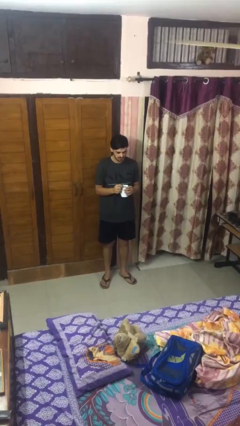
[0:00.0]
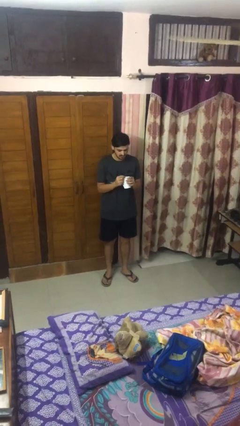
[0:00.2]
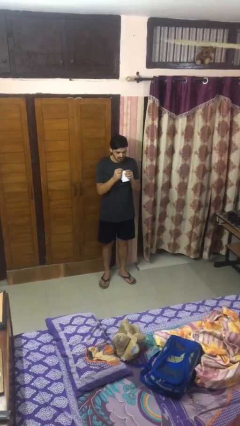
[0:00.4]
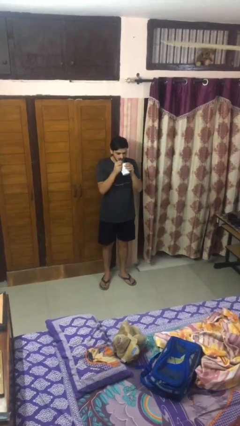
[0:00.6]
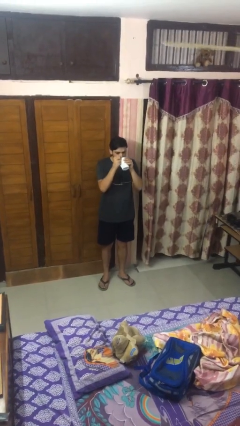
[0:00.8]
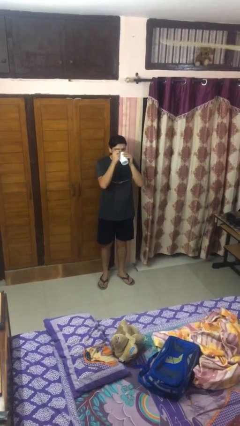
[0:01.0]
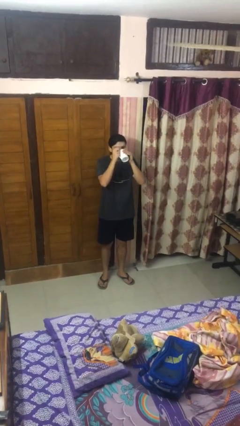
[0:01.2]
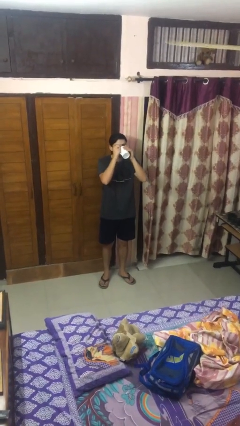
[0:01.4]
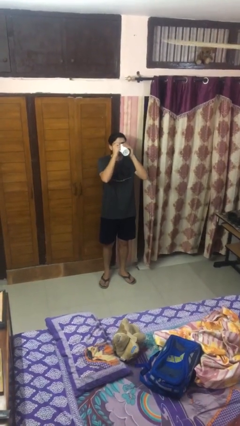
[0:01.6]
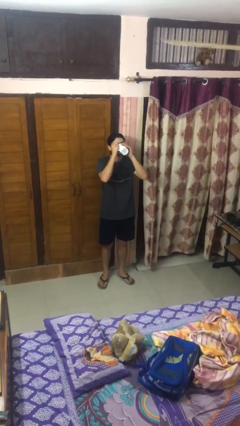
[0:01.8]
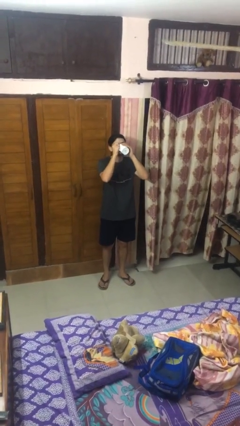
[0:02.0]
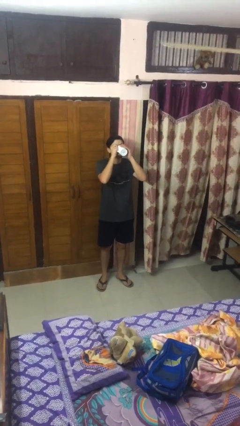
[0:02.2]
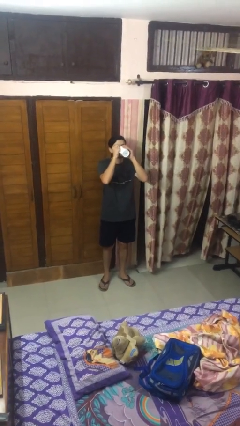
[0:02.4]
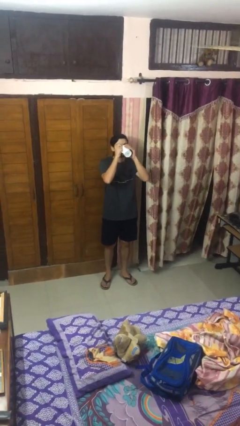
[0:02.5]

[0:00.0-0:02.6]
person drinks from mug

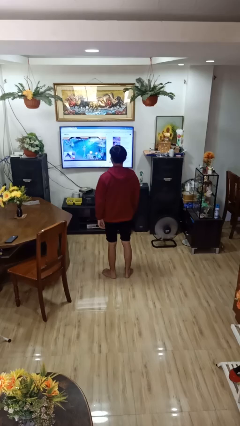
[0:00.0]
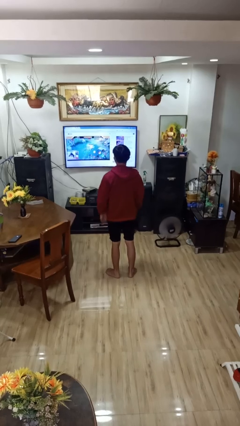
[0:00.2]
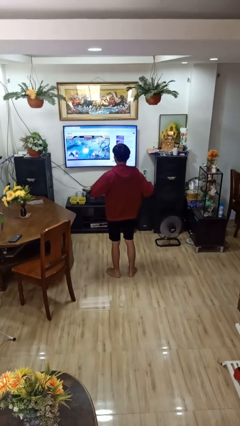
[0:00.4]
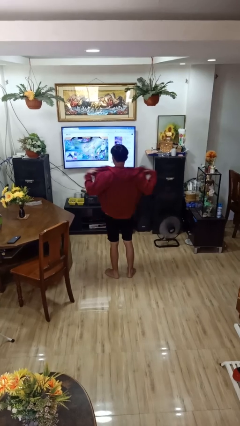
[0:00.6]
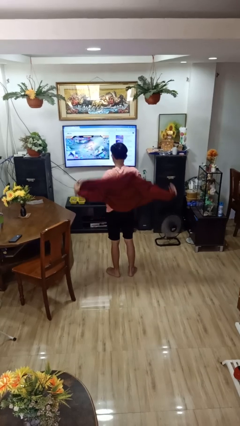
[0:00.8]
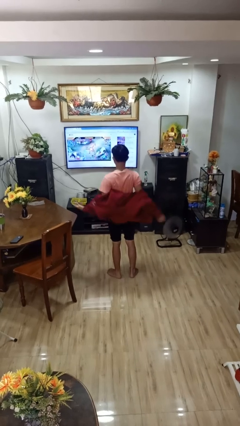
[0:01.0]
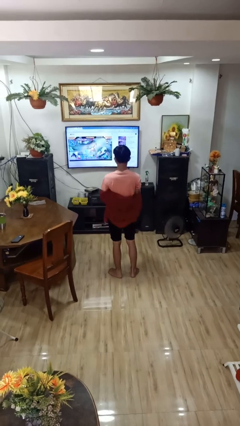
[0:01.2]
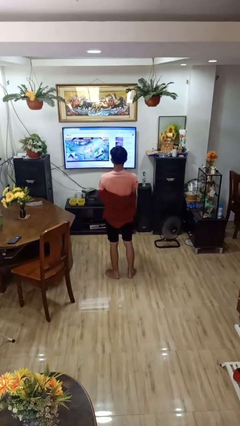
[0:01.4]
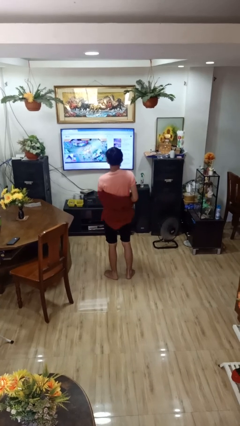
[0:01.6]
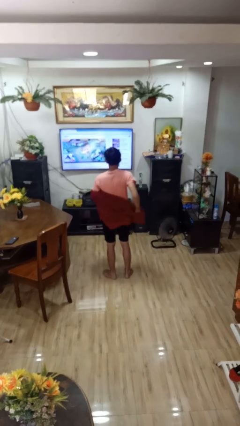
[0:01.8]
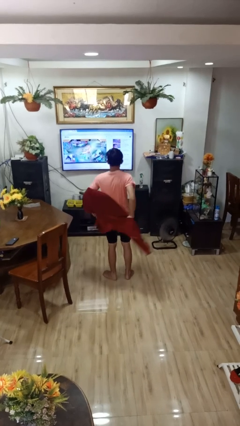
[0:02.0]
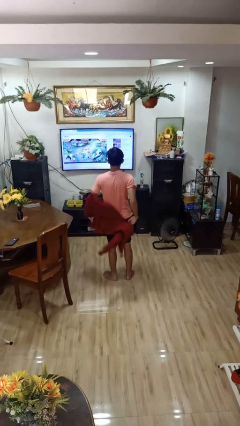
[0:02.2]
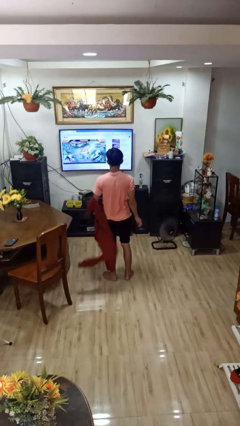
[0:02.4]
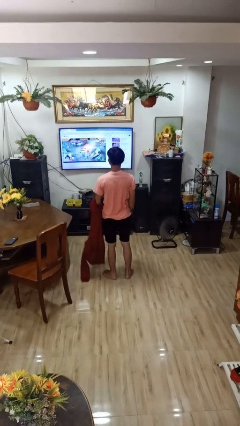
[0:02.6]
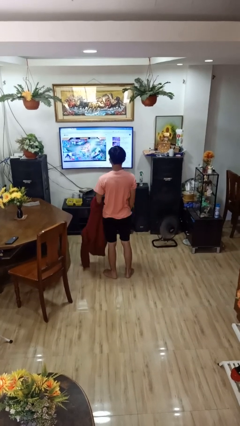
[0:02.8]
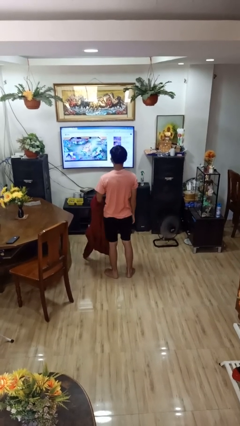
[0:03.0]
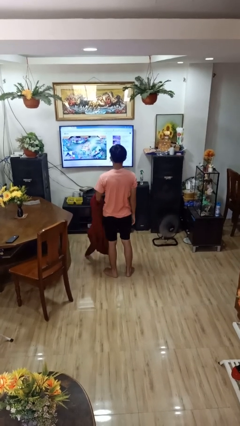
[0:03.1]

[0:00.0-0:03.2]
person takes off jacket

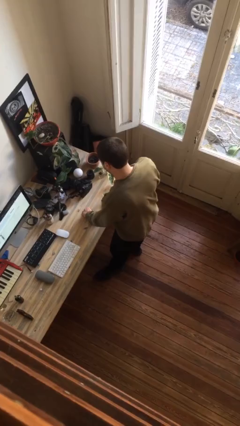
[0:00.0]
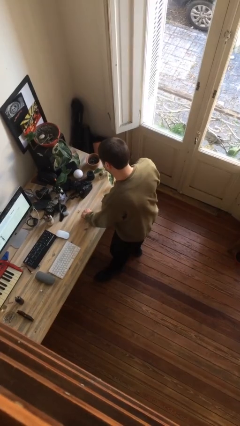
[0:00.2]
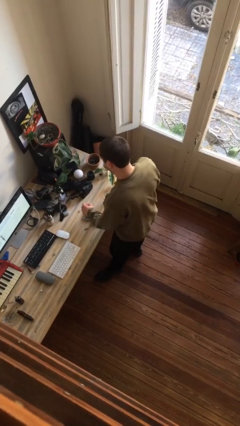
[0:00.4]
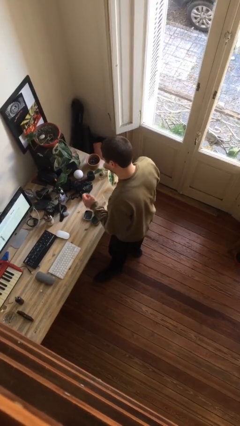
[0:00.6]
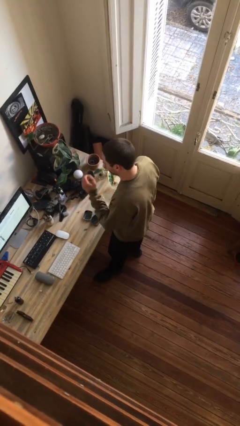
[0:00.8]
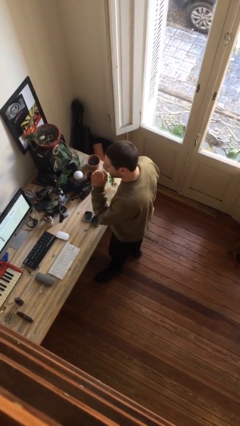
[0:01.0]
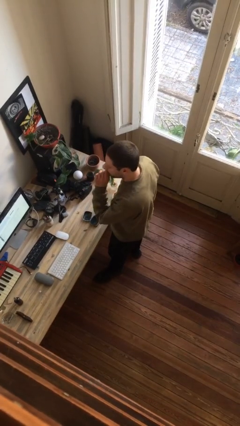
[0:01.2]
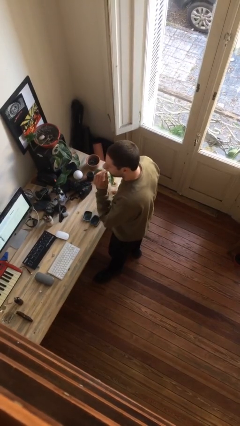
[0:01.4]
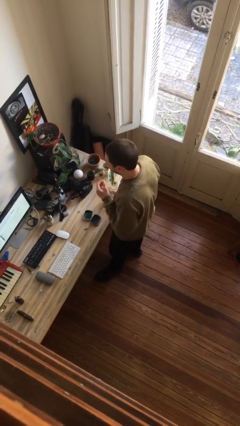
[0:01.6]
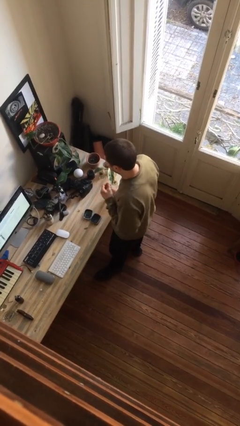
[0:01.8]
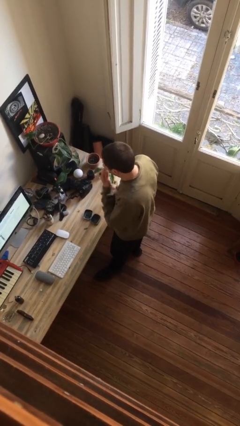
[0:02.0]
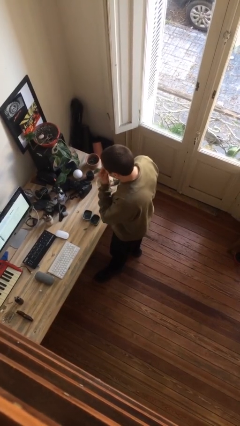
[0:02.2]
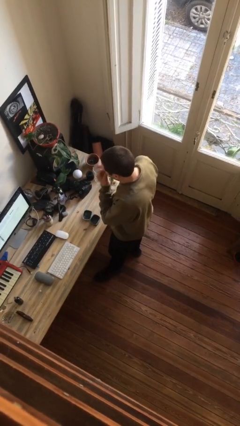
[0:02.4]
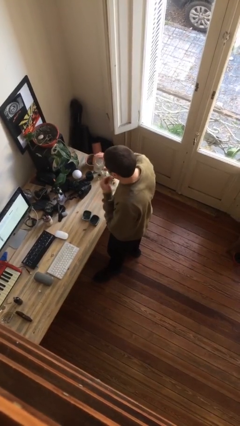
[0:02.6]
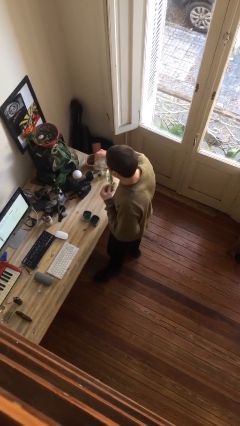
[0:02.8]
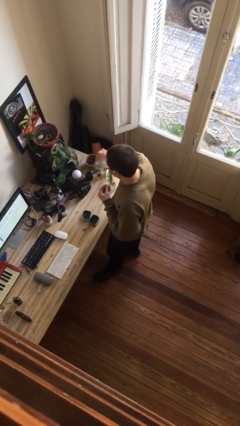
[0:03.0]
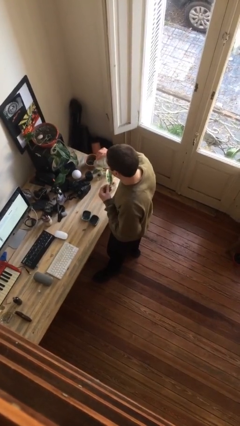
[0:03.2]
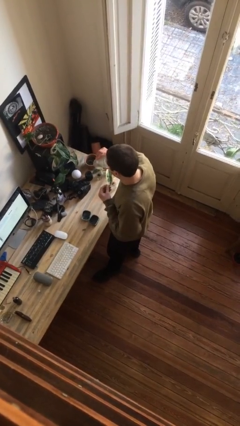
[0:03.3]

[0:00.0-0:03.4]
person takes medicine pills

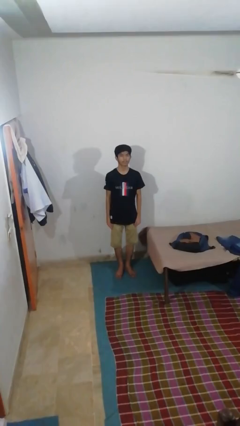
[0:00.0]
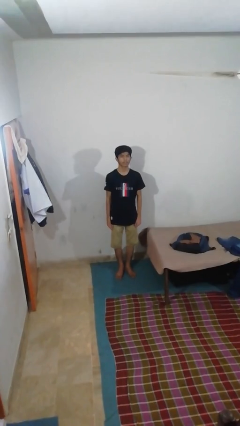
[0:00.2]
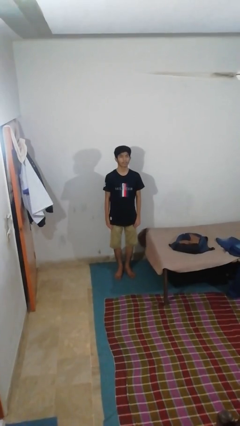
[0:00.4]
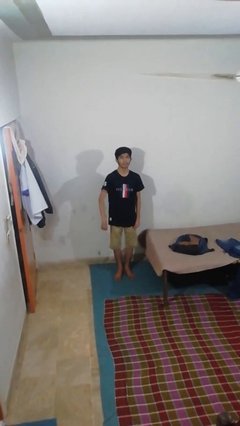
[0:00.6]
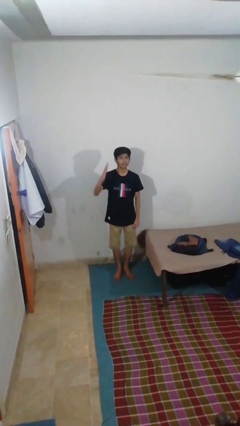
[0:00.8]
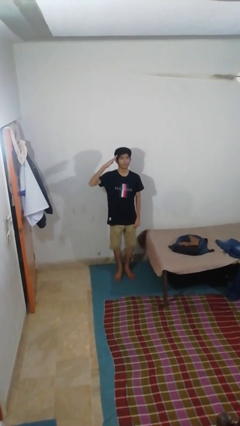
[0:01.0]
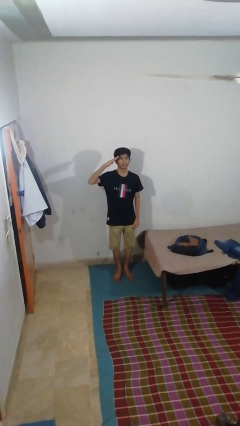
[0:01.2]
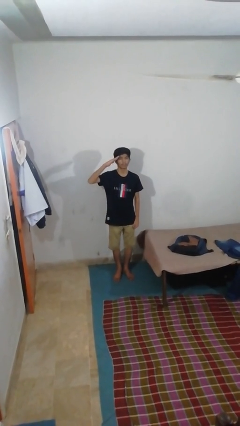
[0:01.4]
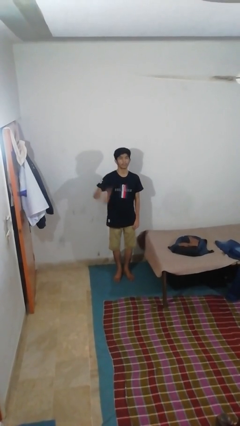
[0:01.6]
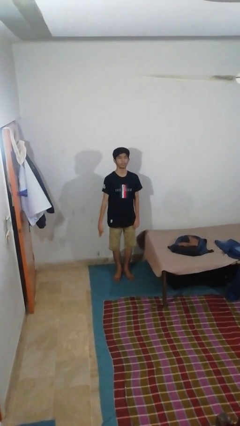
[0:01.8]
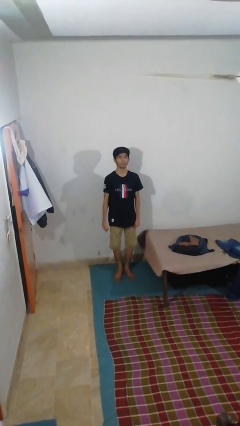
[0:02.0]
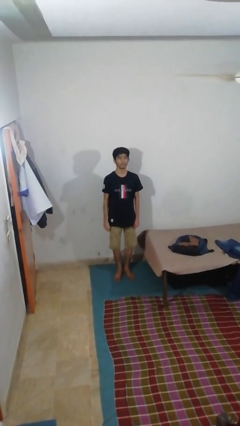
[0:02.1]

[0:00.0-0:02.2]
person salutes

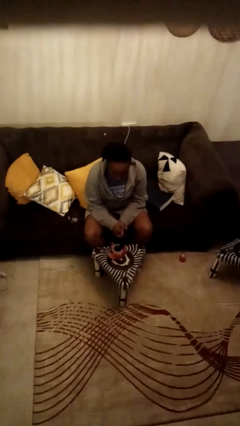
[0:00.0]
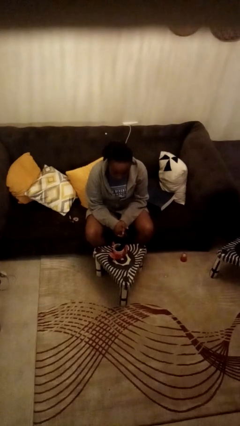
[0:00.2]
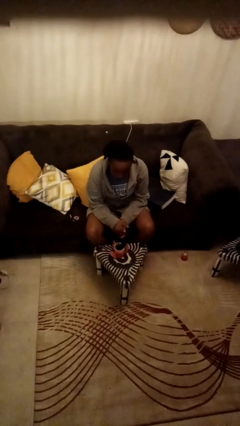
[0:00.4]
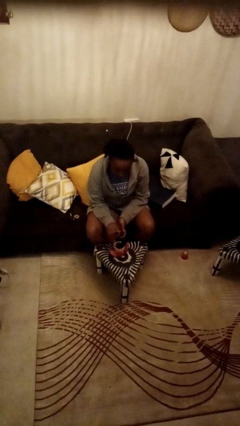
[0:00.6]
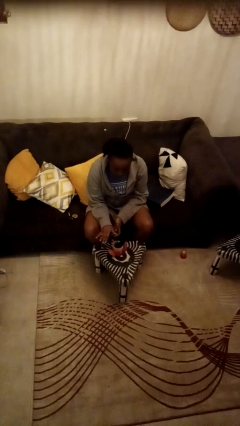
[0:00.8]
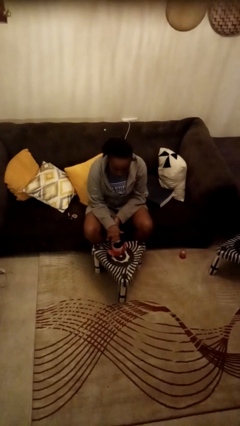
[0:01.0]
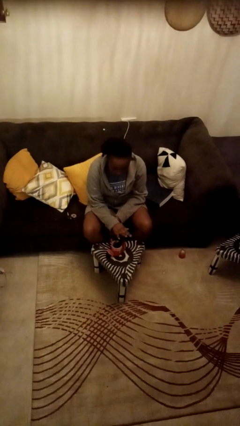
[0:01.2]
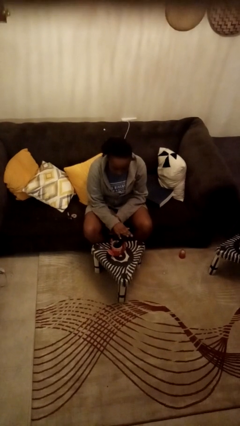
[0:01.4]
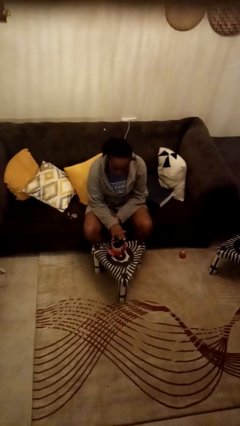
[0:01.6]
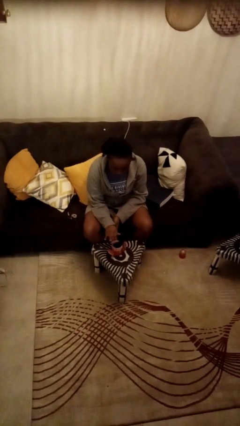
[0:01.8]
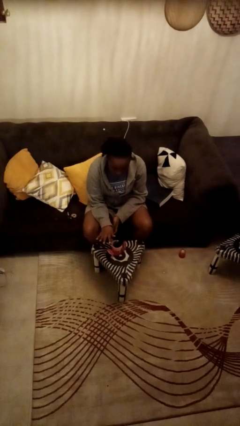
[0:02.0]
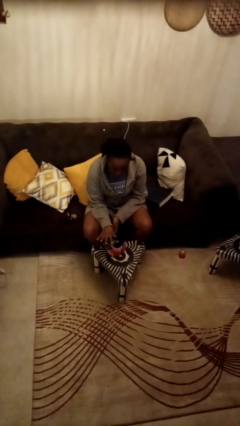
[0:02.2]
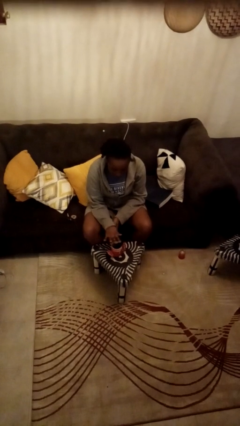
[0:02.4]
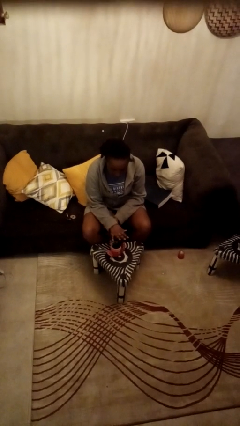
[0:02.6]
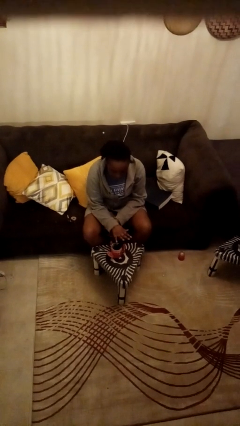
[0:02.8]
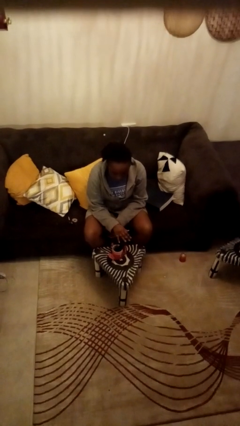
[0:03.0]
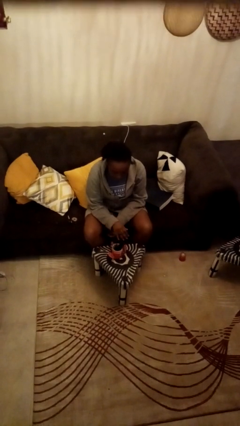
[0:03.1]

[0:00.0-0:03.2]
person waves hand over object

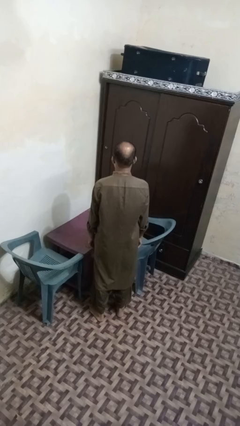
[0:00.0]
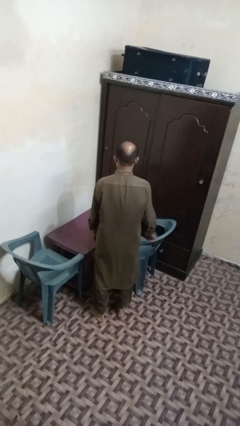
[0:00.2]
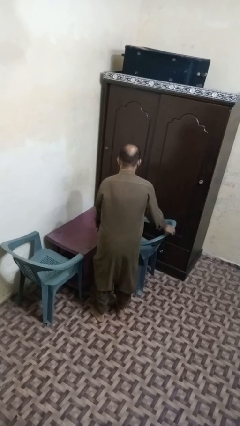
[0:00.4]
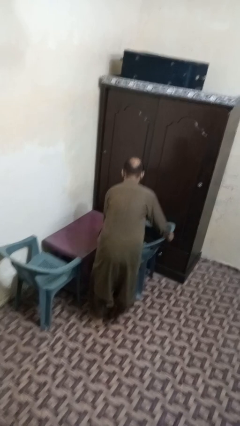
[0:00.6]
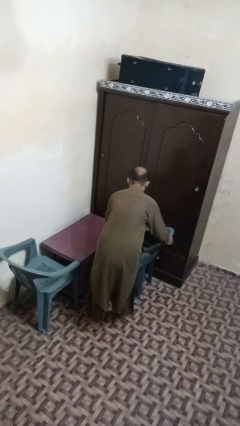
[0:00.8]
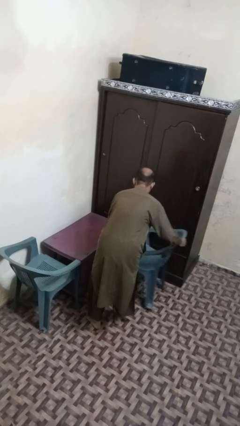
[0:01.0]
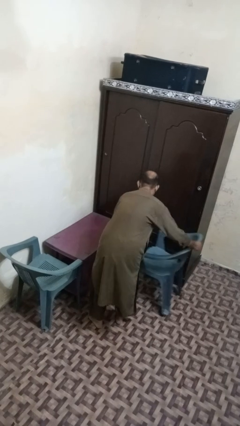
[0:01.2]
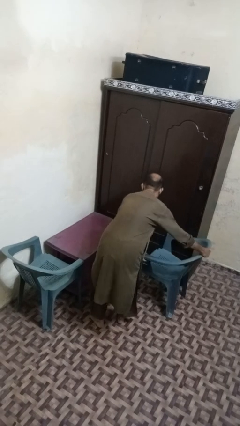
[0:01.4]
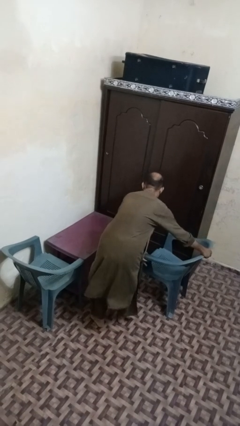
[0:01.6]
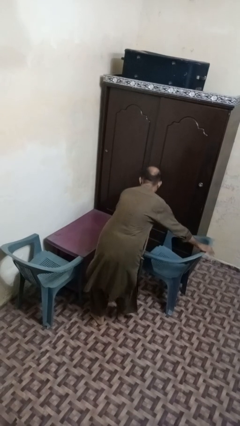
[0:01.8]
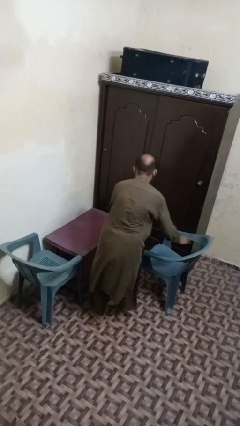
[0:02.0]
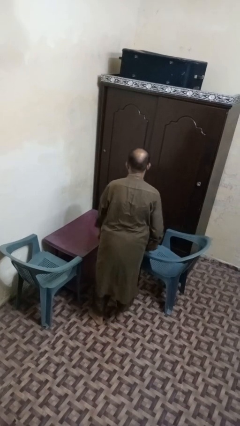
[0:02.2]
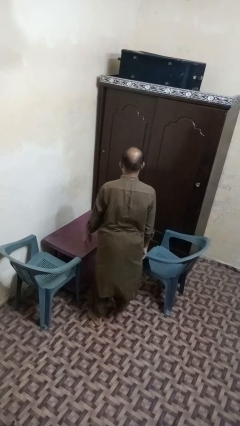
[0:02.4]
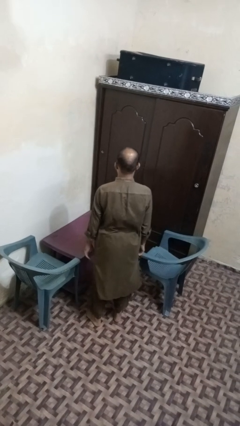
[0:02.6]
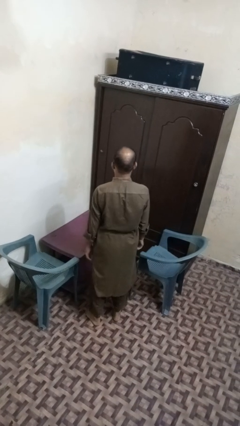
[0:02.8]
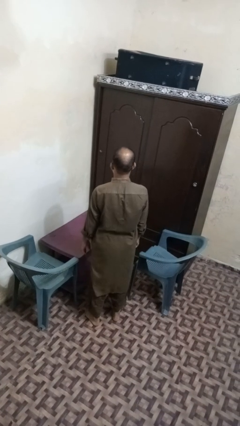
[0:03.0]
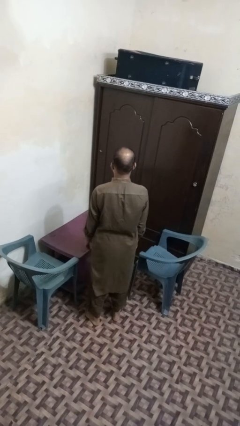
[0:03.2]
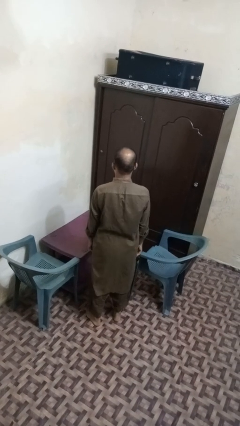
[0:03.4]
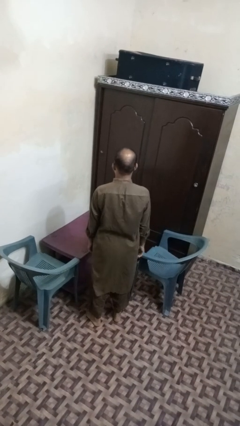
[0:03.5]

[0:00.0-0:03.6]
person pulls out chair
